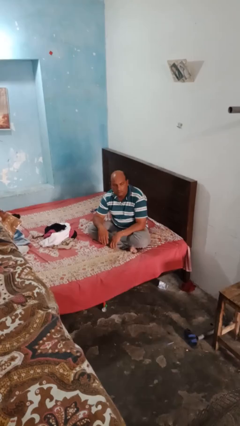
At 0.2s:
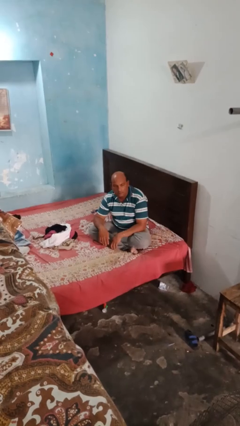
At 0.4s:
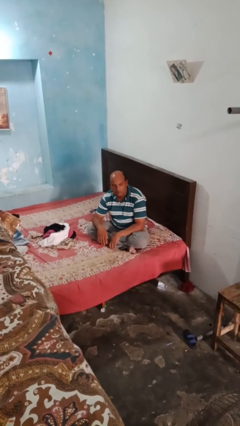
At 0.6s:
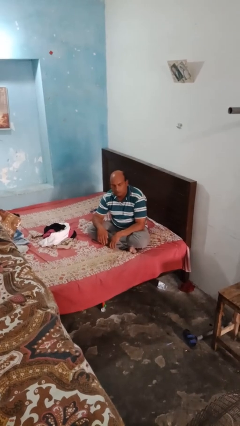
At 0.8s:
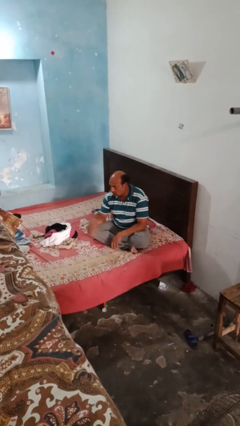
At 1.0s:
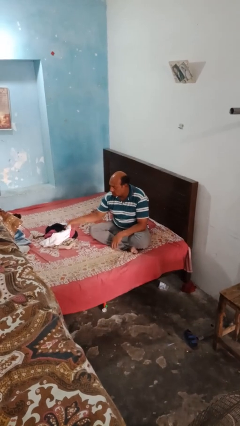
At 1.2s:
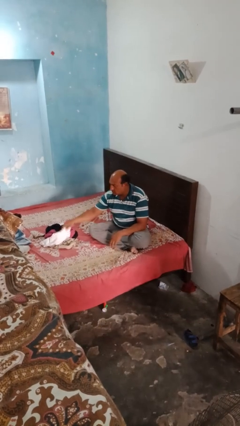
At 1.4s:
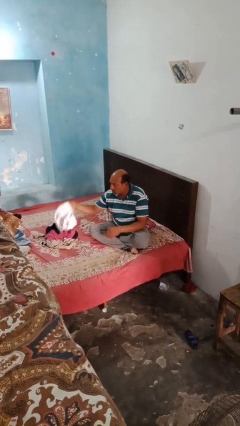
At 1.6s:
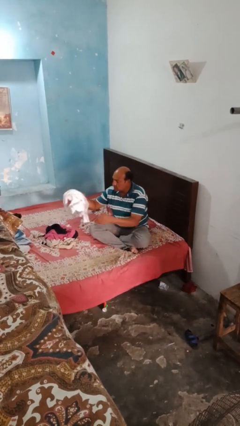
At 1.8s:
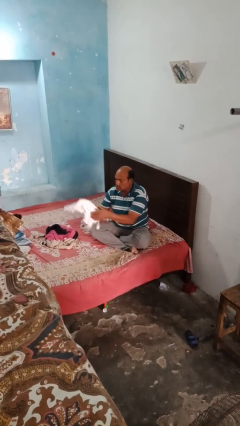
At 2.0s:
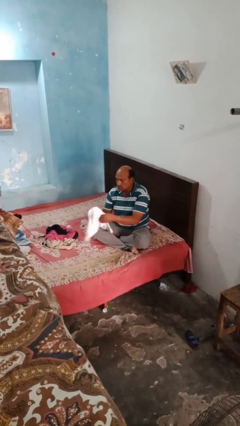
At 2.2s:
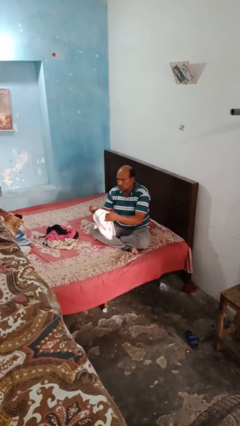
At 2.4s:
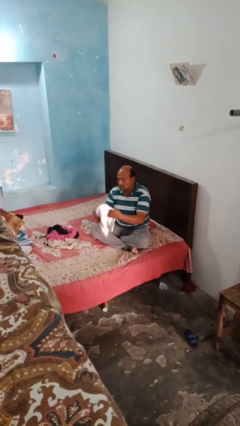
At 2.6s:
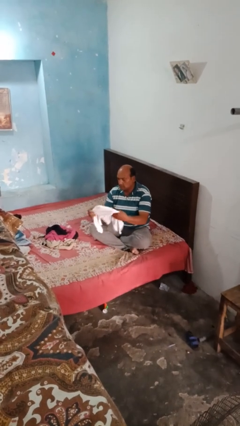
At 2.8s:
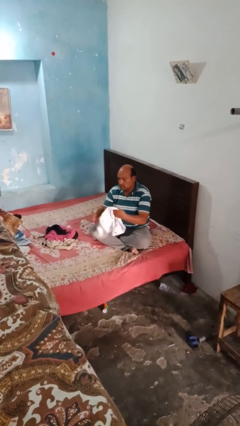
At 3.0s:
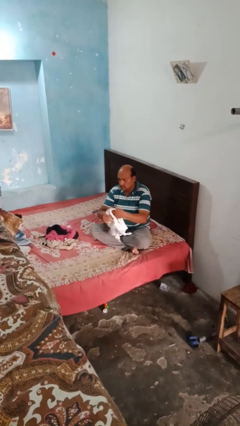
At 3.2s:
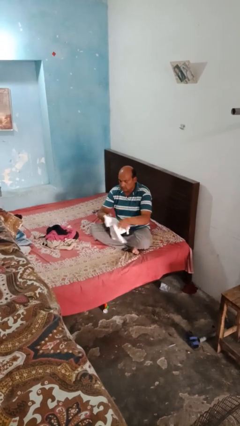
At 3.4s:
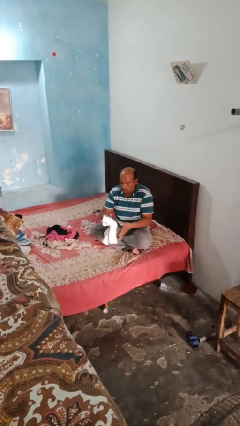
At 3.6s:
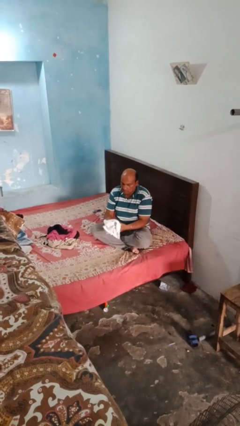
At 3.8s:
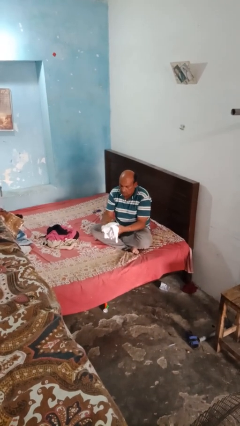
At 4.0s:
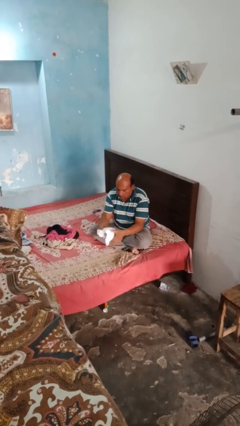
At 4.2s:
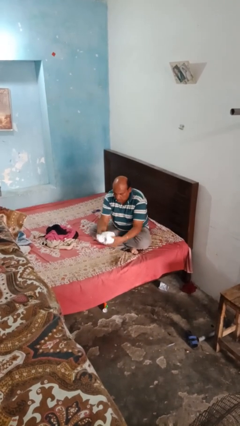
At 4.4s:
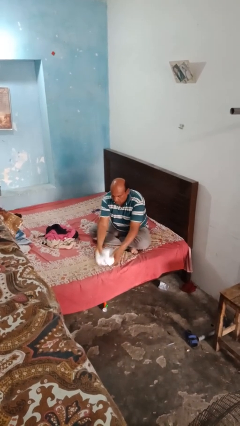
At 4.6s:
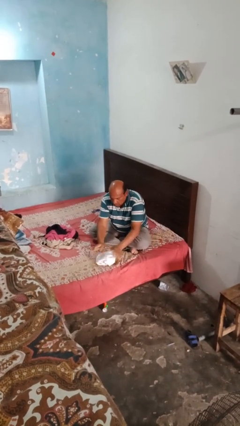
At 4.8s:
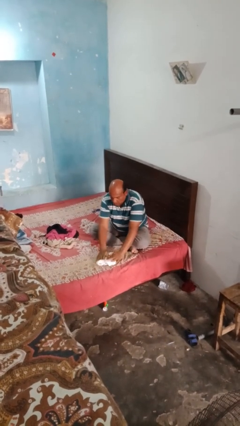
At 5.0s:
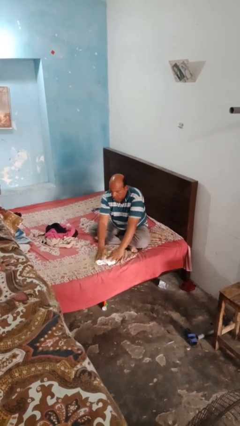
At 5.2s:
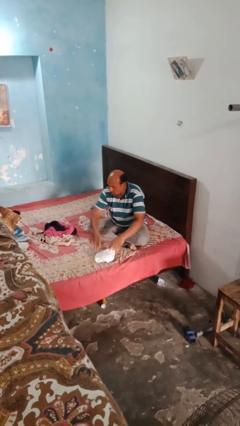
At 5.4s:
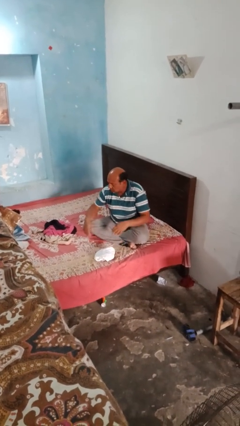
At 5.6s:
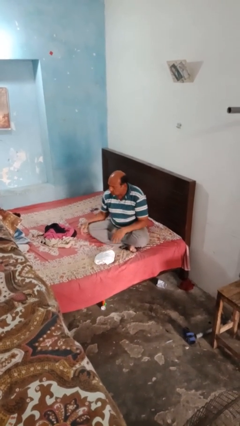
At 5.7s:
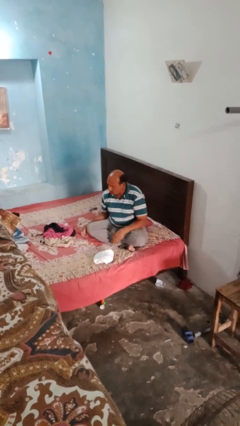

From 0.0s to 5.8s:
person folds shirt

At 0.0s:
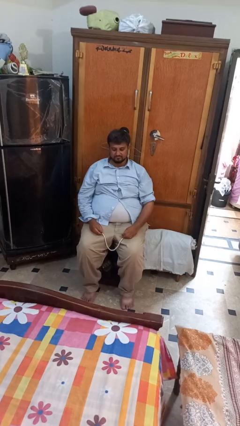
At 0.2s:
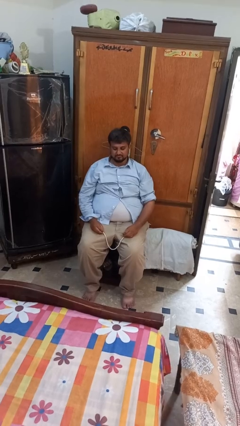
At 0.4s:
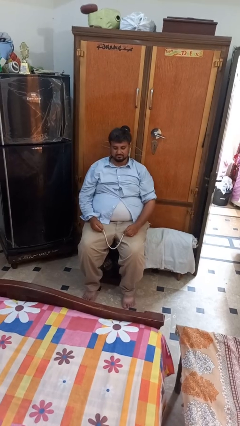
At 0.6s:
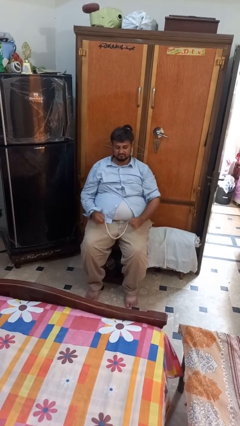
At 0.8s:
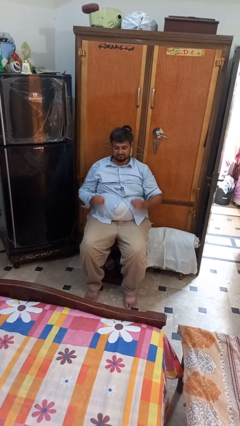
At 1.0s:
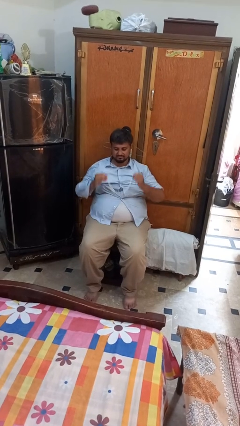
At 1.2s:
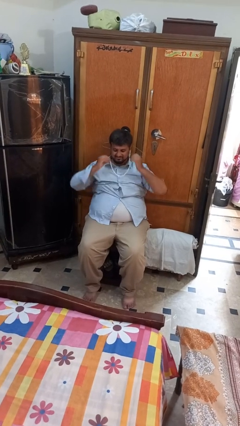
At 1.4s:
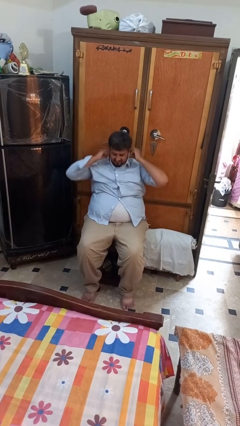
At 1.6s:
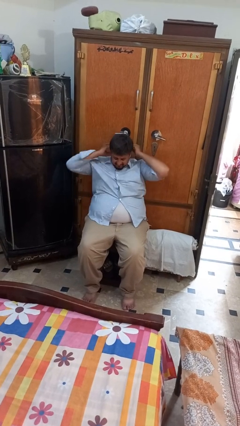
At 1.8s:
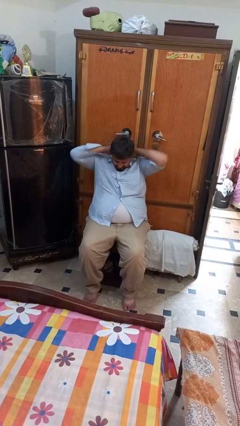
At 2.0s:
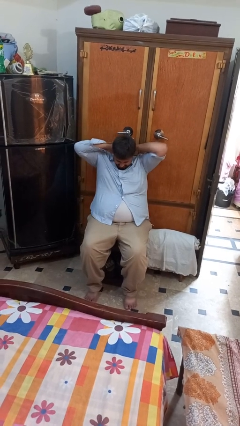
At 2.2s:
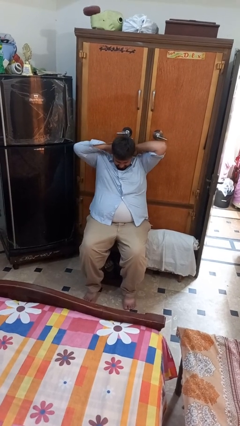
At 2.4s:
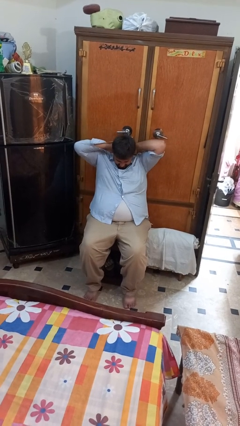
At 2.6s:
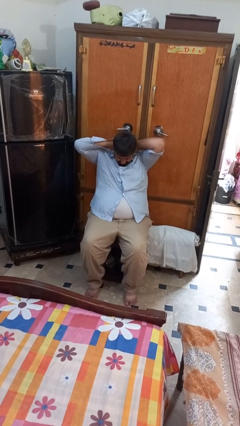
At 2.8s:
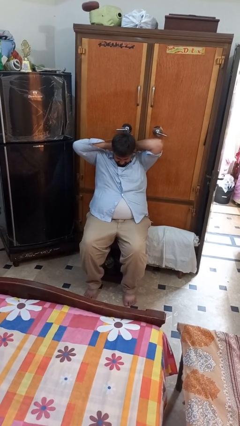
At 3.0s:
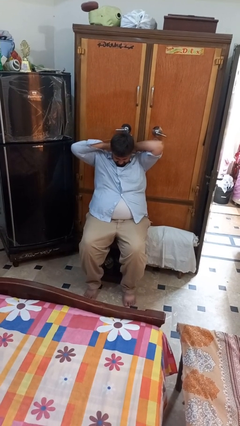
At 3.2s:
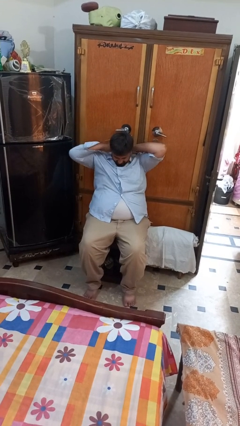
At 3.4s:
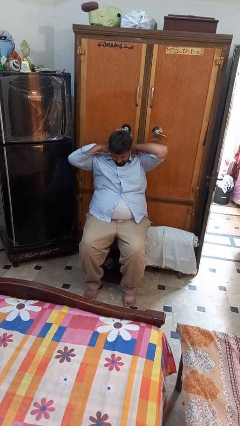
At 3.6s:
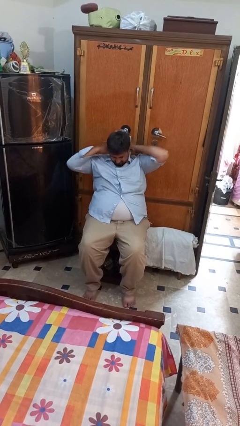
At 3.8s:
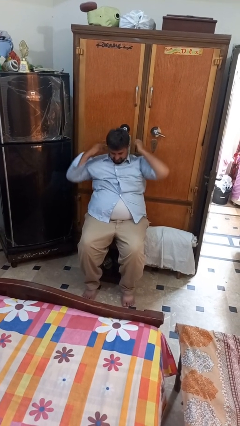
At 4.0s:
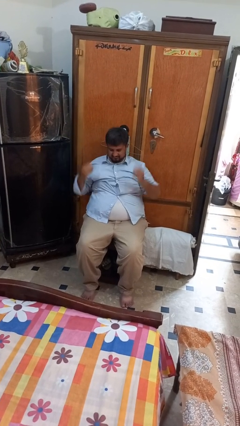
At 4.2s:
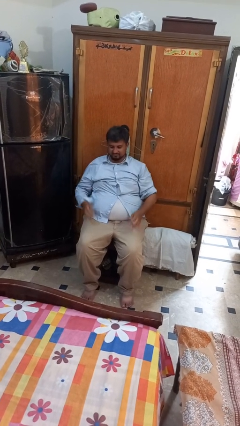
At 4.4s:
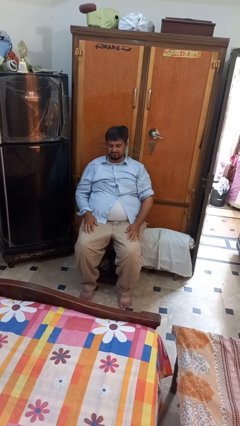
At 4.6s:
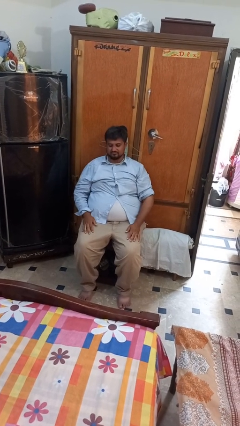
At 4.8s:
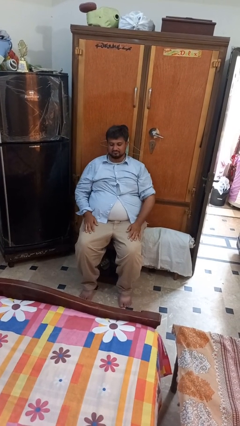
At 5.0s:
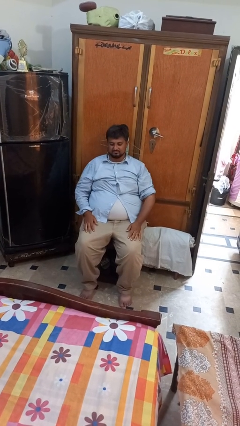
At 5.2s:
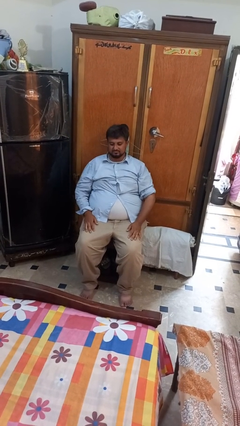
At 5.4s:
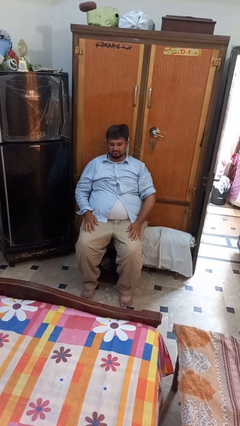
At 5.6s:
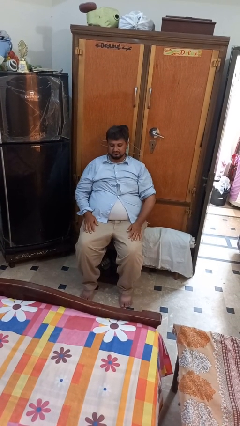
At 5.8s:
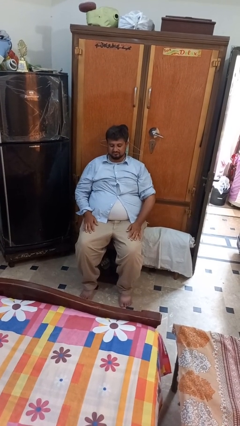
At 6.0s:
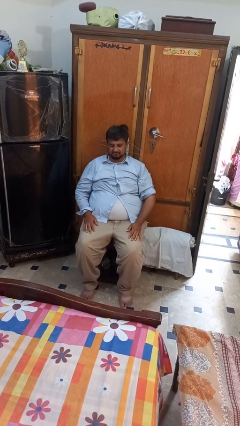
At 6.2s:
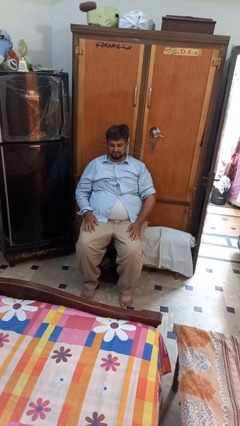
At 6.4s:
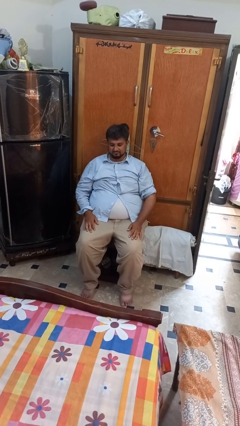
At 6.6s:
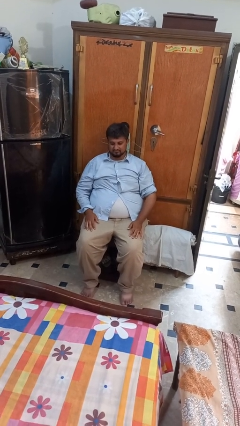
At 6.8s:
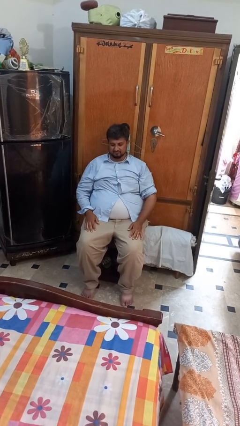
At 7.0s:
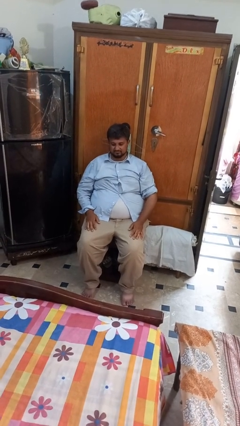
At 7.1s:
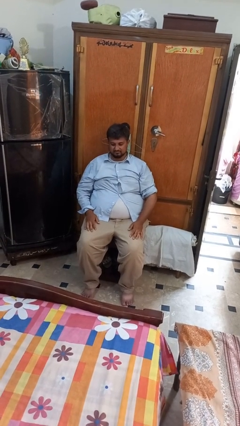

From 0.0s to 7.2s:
person puts on necklace

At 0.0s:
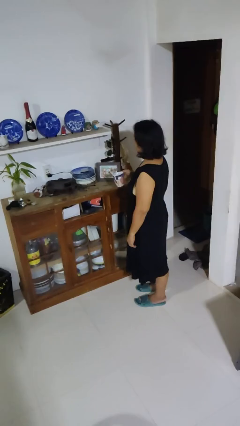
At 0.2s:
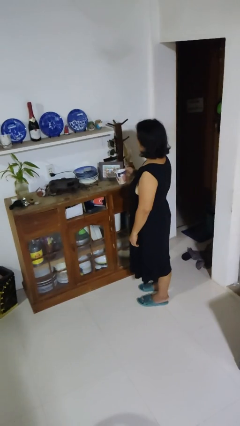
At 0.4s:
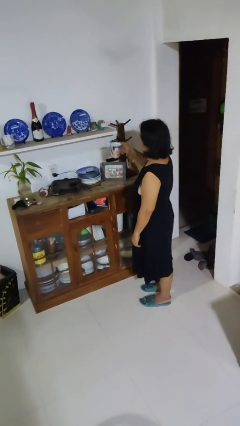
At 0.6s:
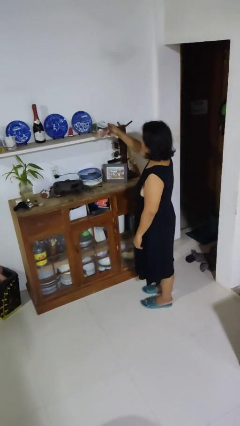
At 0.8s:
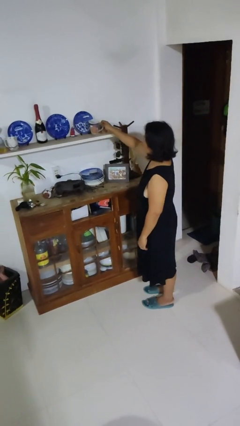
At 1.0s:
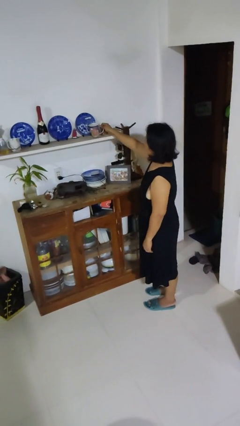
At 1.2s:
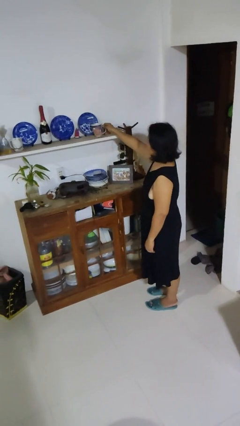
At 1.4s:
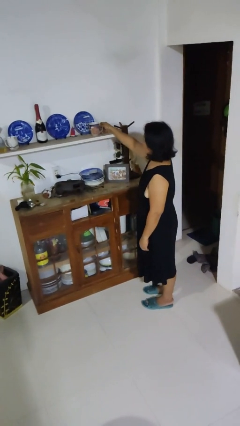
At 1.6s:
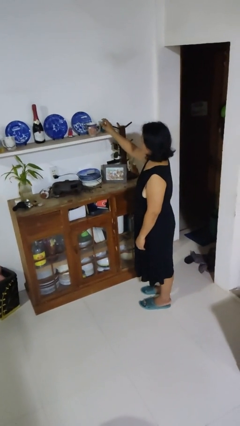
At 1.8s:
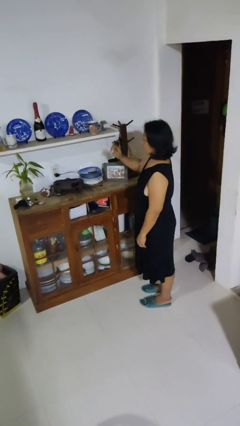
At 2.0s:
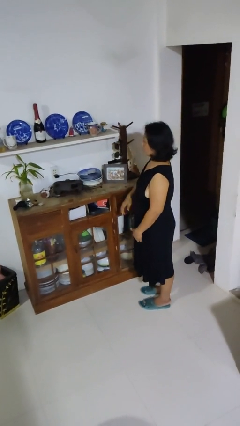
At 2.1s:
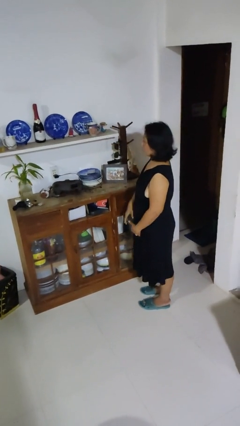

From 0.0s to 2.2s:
person puts down object on shelf

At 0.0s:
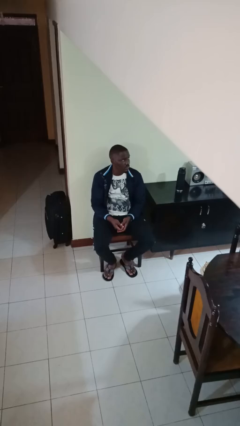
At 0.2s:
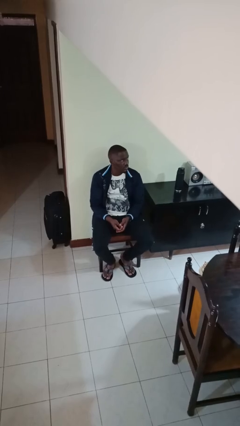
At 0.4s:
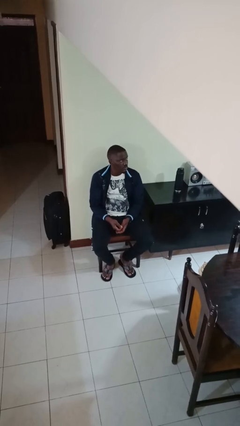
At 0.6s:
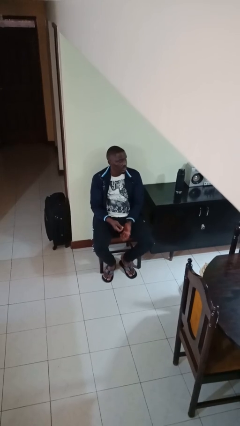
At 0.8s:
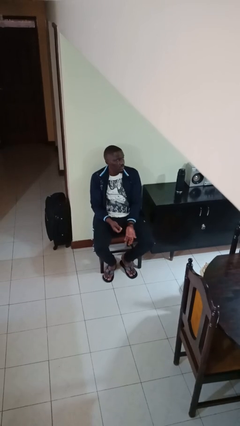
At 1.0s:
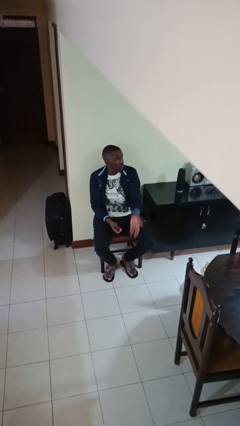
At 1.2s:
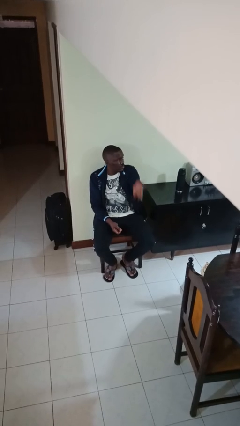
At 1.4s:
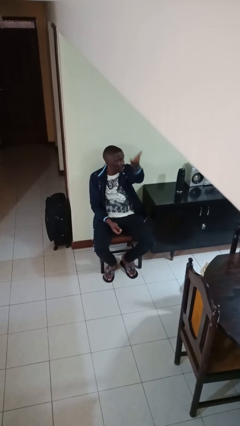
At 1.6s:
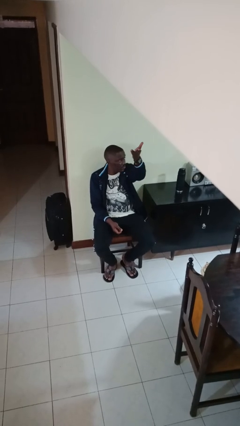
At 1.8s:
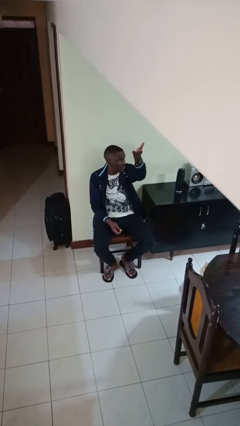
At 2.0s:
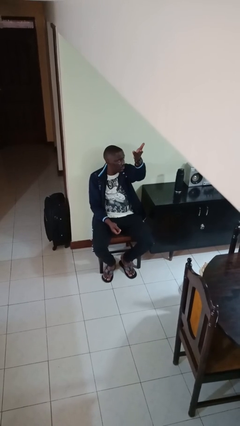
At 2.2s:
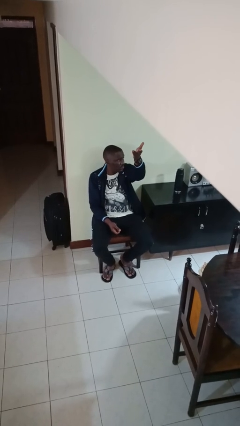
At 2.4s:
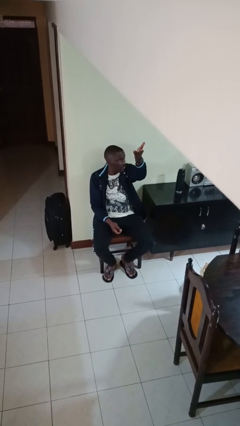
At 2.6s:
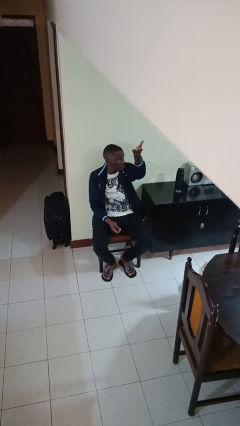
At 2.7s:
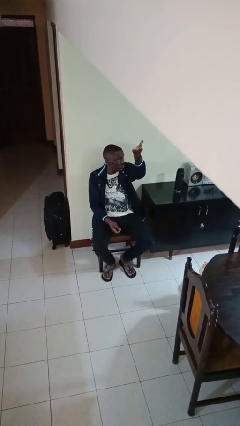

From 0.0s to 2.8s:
person gestures swipe up

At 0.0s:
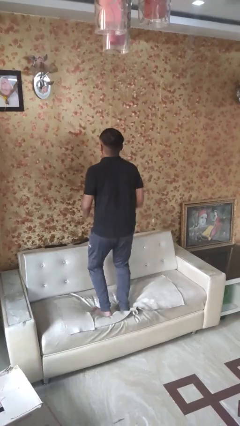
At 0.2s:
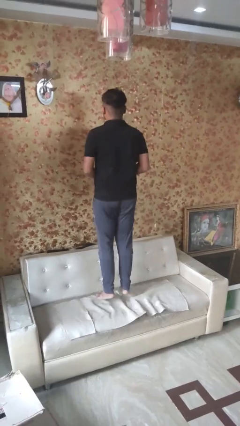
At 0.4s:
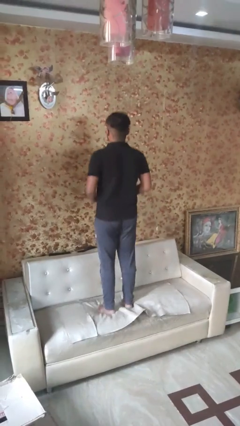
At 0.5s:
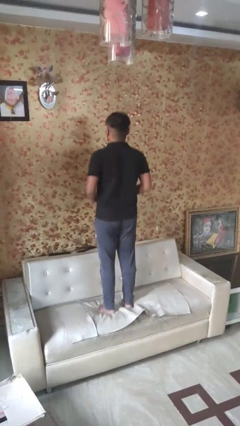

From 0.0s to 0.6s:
person jumps on bed
